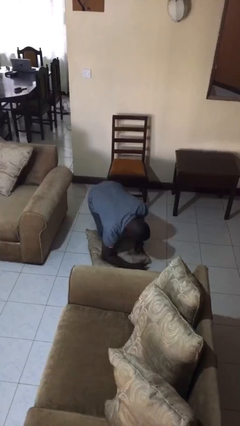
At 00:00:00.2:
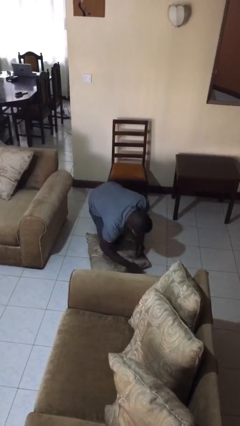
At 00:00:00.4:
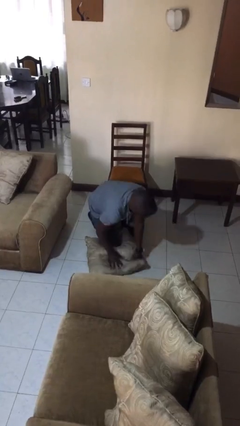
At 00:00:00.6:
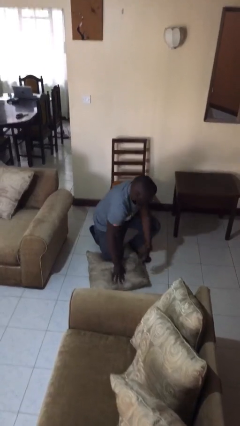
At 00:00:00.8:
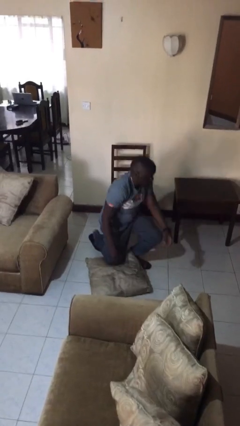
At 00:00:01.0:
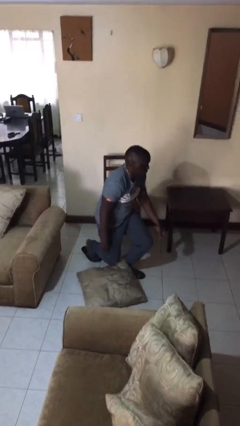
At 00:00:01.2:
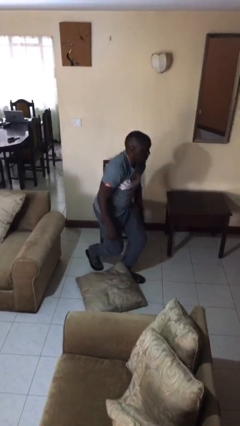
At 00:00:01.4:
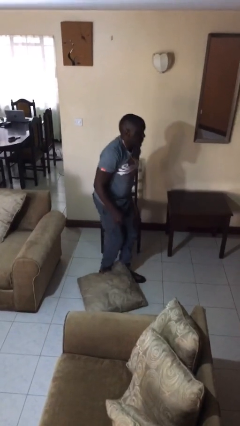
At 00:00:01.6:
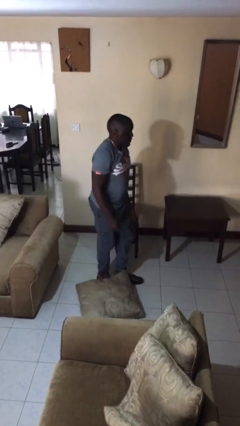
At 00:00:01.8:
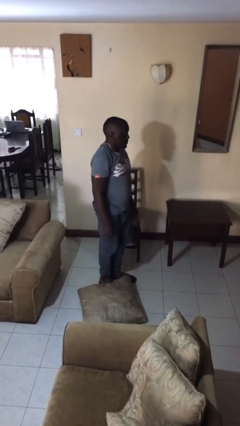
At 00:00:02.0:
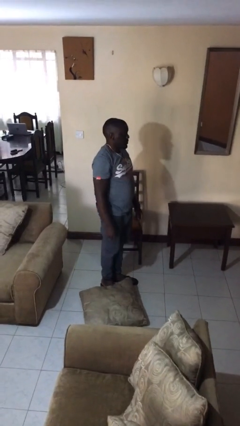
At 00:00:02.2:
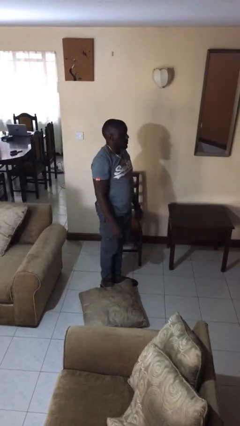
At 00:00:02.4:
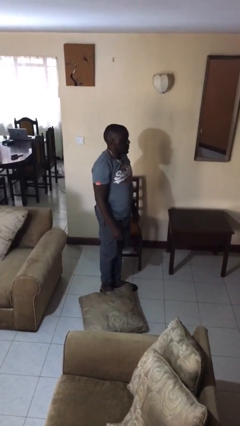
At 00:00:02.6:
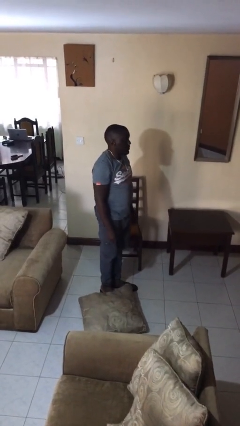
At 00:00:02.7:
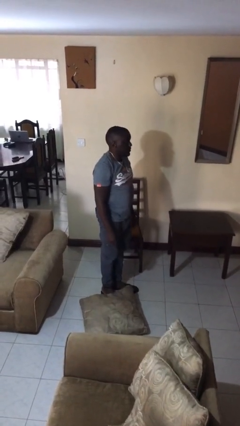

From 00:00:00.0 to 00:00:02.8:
person stands up from floor

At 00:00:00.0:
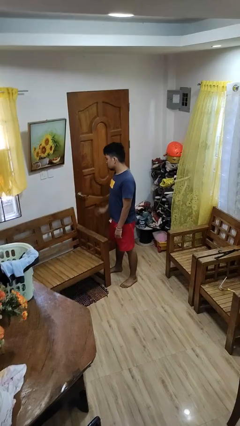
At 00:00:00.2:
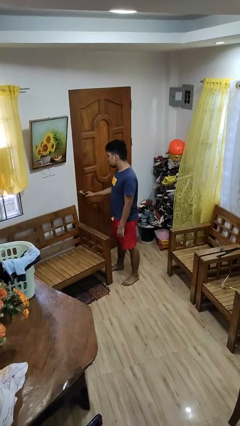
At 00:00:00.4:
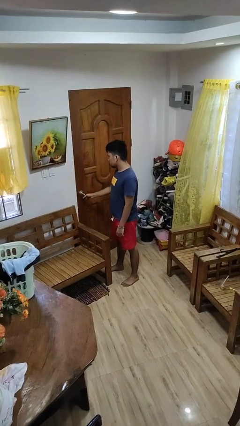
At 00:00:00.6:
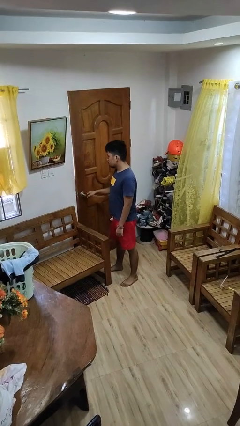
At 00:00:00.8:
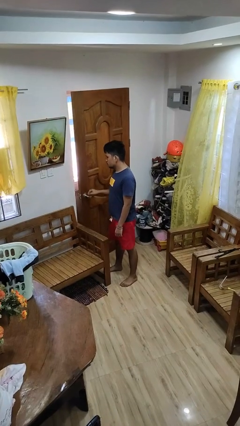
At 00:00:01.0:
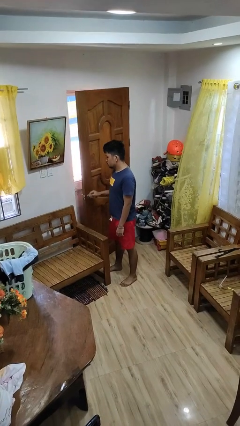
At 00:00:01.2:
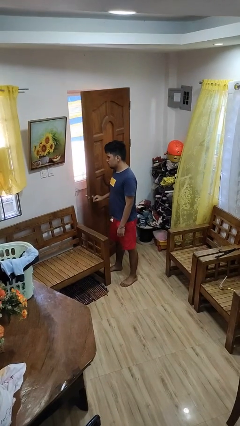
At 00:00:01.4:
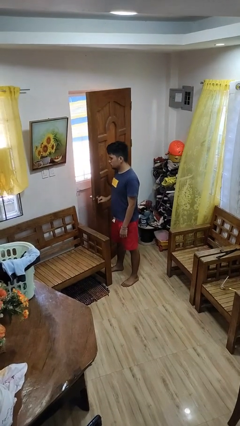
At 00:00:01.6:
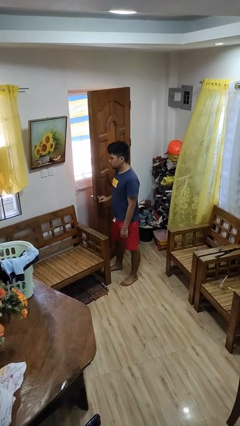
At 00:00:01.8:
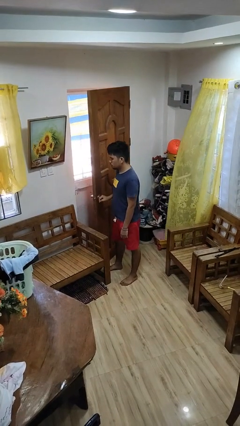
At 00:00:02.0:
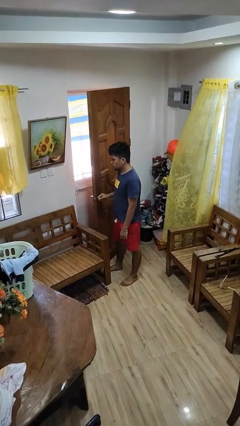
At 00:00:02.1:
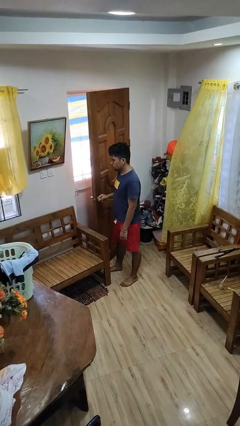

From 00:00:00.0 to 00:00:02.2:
person opens facility door

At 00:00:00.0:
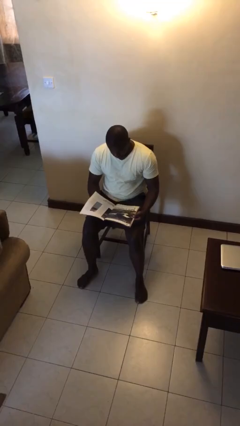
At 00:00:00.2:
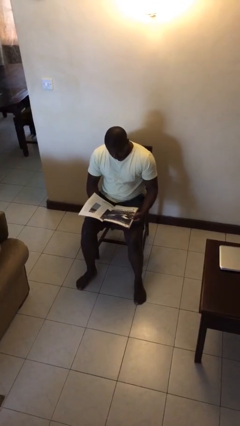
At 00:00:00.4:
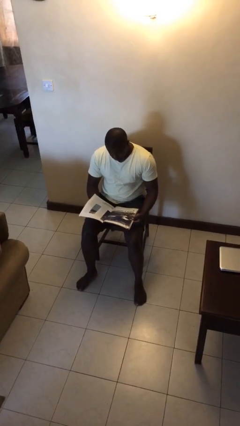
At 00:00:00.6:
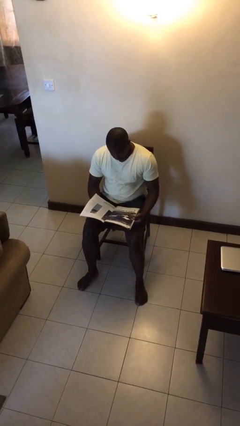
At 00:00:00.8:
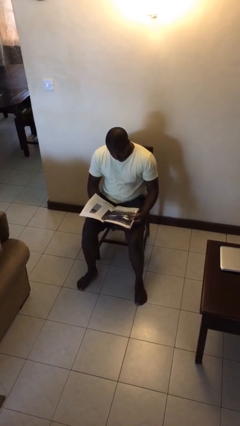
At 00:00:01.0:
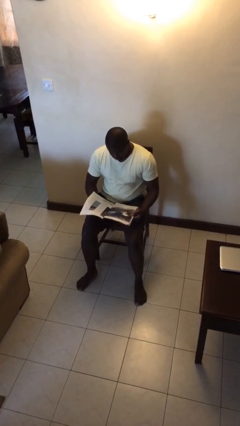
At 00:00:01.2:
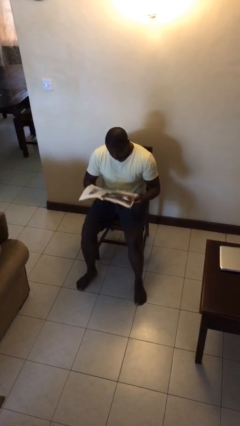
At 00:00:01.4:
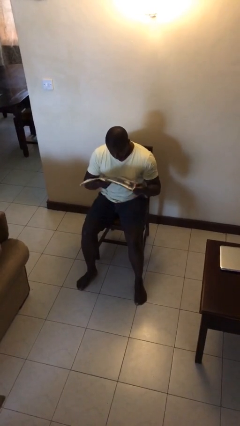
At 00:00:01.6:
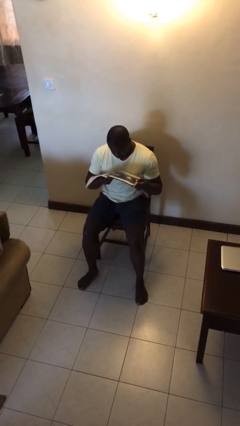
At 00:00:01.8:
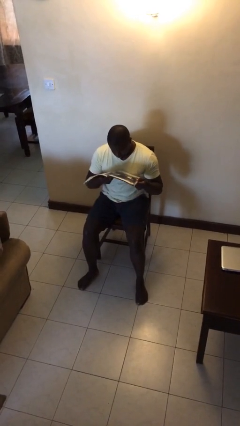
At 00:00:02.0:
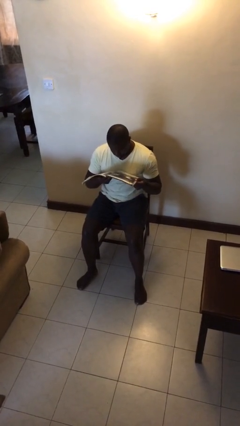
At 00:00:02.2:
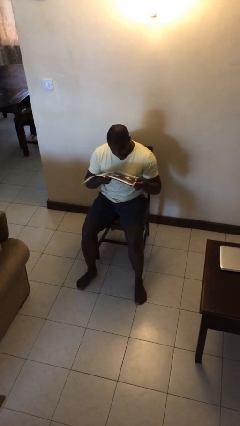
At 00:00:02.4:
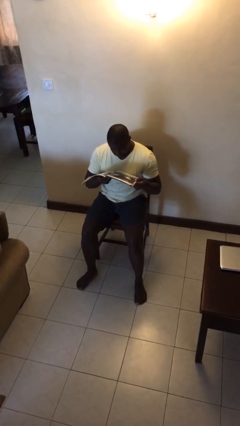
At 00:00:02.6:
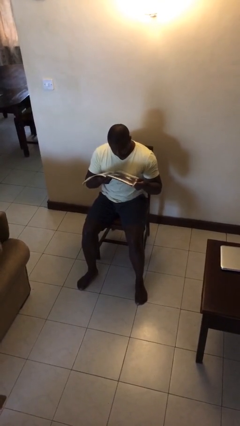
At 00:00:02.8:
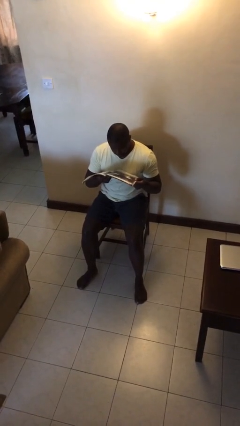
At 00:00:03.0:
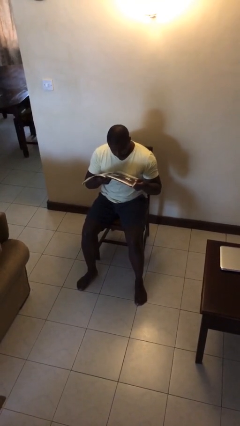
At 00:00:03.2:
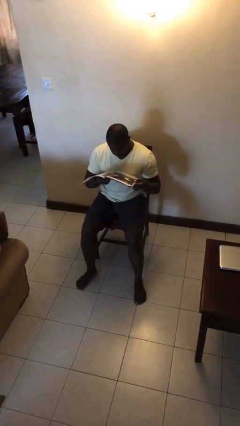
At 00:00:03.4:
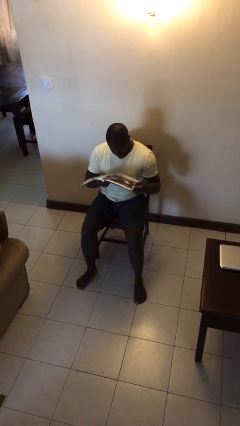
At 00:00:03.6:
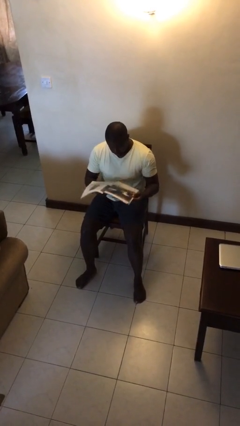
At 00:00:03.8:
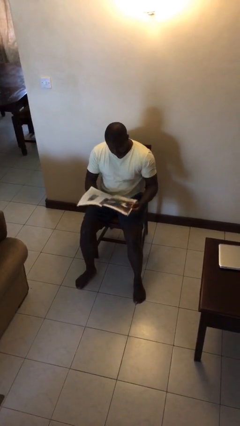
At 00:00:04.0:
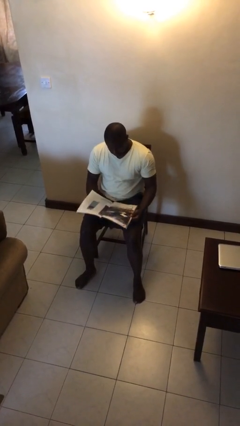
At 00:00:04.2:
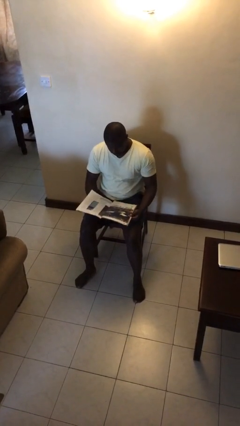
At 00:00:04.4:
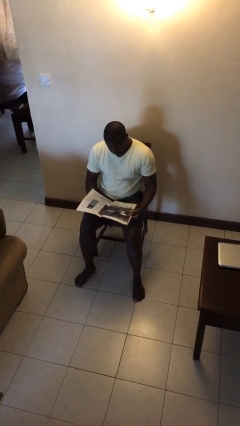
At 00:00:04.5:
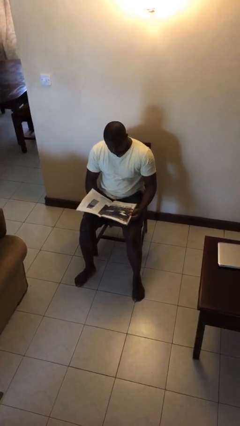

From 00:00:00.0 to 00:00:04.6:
person reads document

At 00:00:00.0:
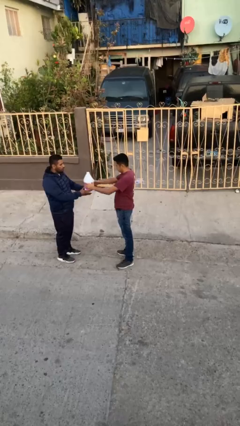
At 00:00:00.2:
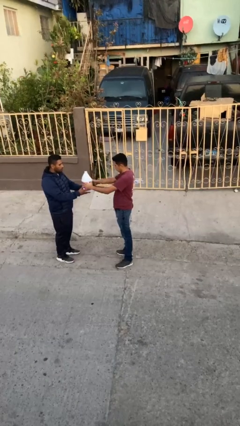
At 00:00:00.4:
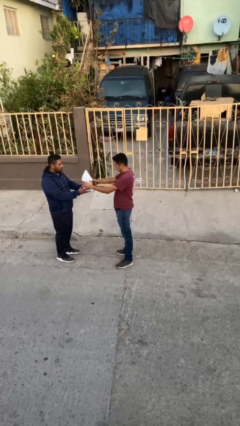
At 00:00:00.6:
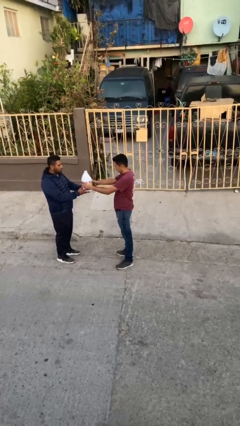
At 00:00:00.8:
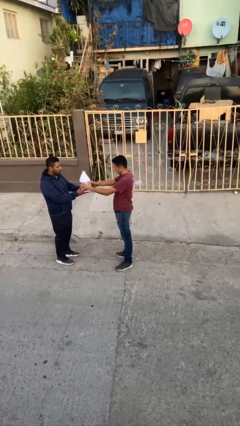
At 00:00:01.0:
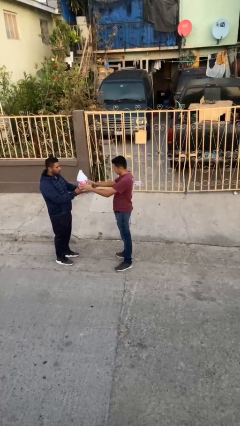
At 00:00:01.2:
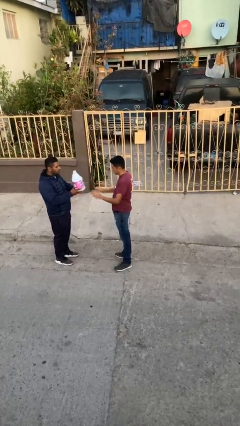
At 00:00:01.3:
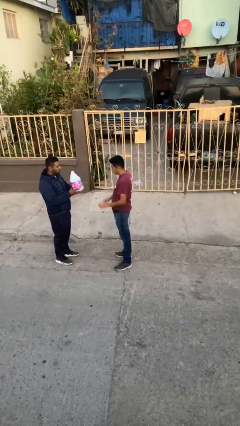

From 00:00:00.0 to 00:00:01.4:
person transfers object to person

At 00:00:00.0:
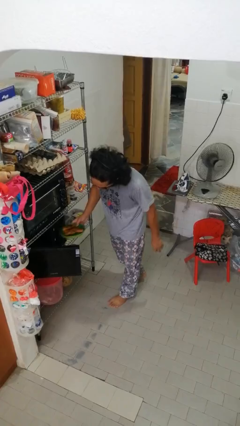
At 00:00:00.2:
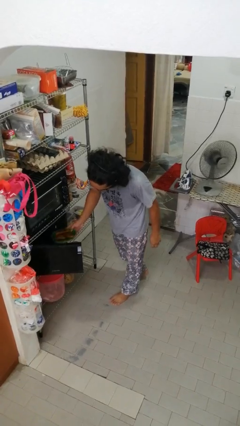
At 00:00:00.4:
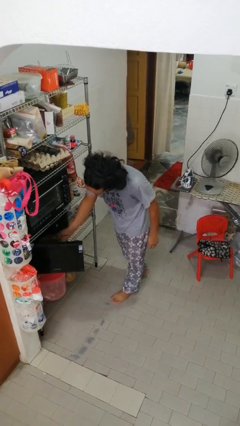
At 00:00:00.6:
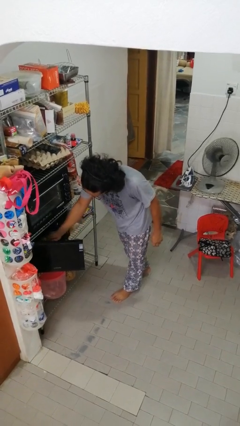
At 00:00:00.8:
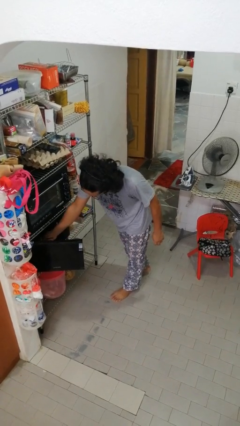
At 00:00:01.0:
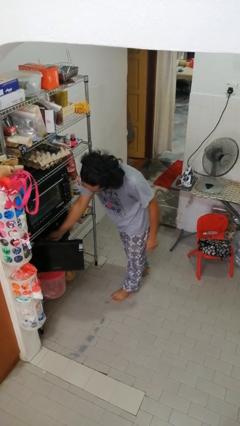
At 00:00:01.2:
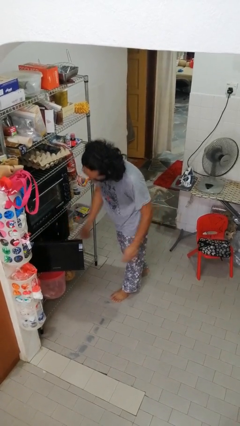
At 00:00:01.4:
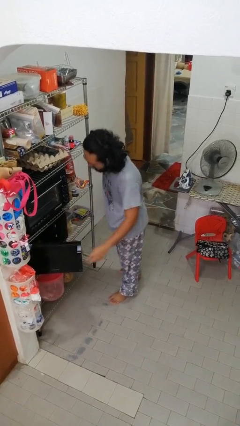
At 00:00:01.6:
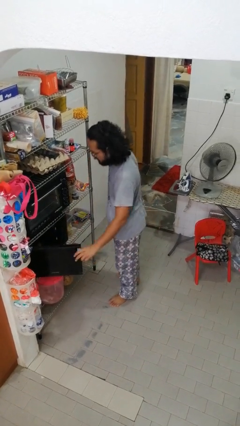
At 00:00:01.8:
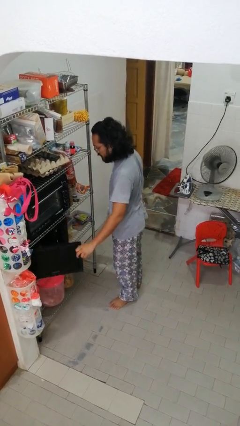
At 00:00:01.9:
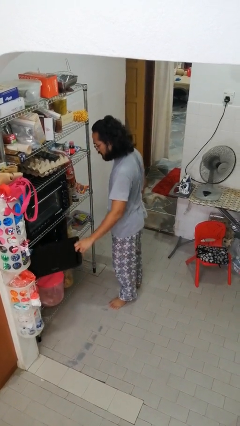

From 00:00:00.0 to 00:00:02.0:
person puts object into microwave

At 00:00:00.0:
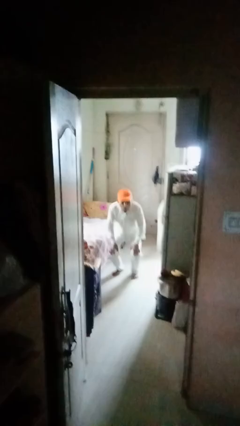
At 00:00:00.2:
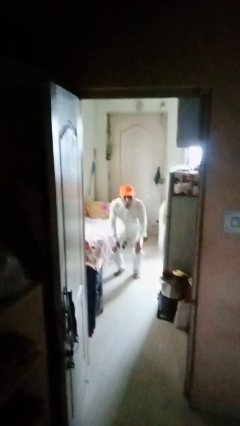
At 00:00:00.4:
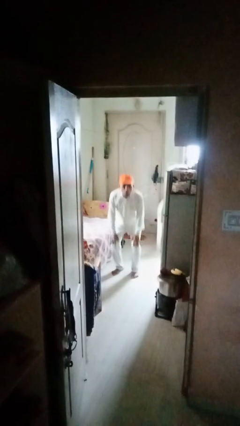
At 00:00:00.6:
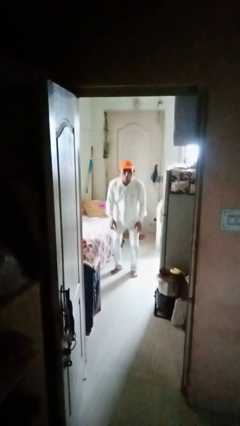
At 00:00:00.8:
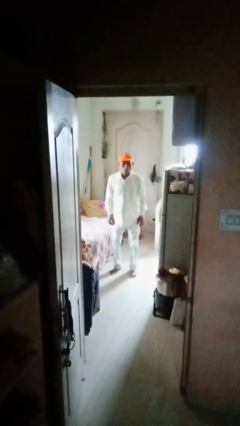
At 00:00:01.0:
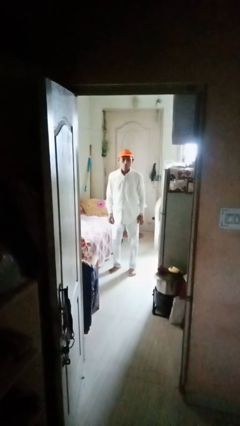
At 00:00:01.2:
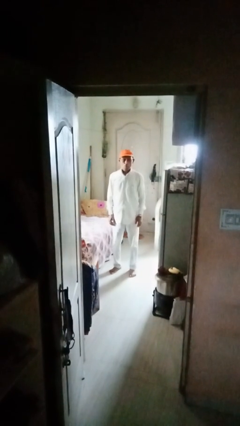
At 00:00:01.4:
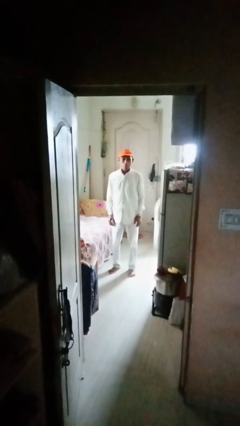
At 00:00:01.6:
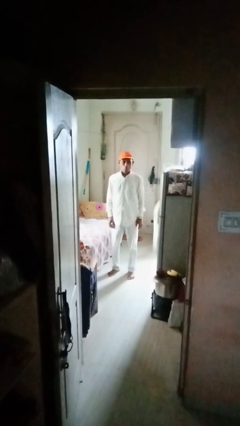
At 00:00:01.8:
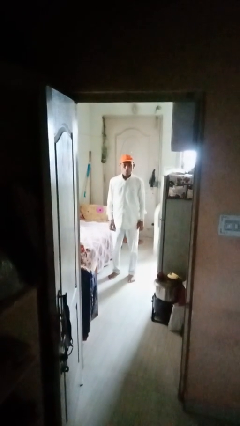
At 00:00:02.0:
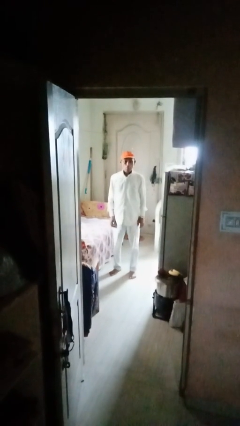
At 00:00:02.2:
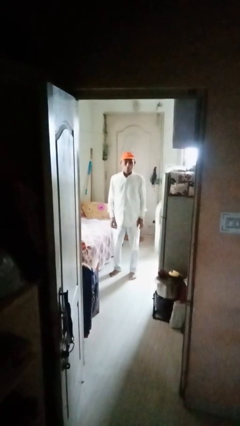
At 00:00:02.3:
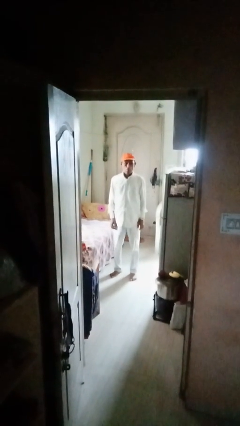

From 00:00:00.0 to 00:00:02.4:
person stands up

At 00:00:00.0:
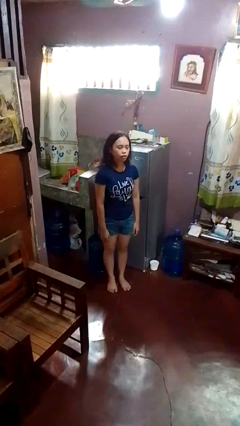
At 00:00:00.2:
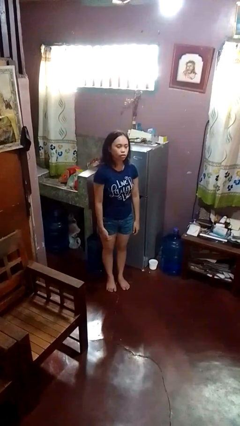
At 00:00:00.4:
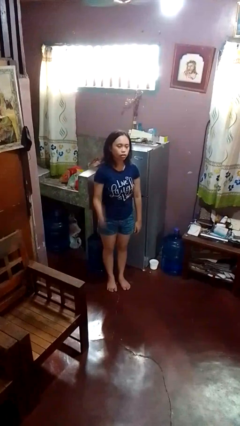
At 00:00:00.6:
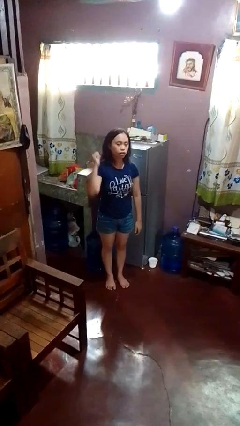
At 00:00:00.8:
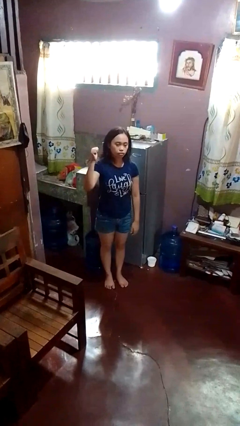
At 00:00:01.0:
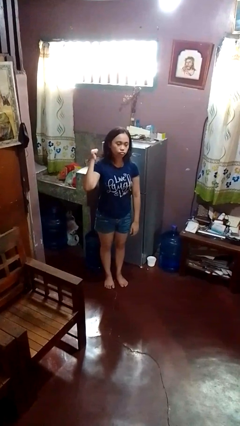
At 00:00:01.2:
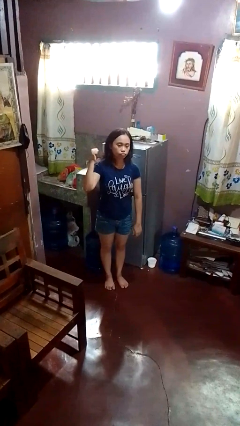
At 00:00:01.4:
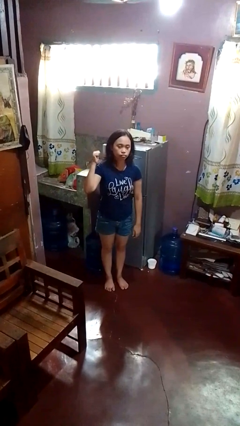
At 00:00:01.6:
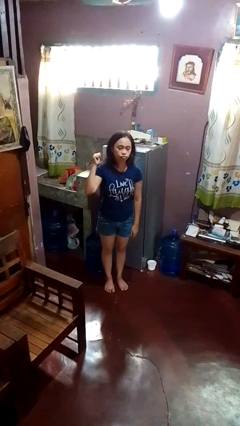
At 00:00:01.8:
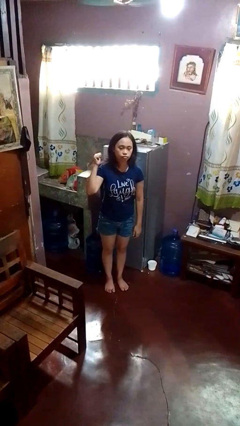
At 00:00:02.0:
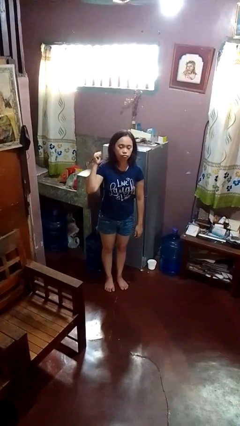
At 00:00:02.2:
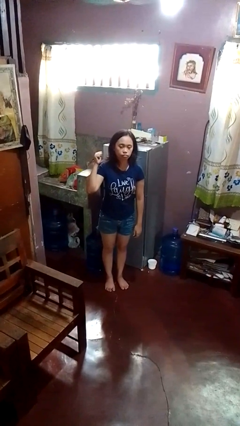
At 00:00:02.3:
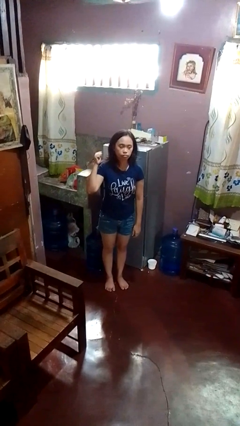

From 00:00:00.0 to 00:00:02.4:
person gestures behind me
